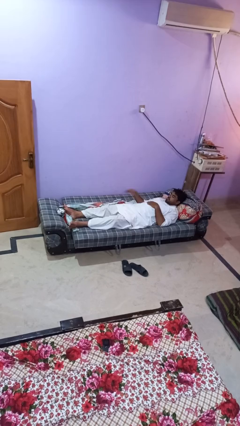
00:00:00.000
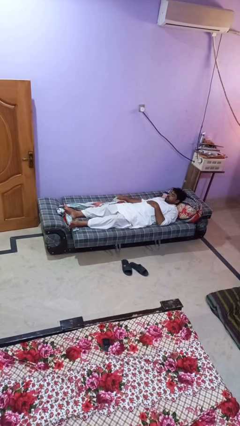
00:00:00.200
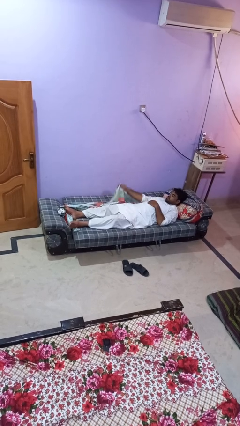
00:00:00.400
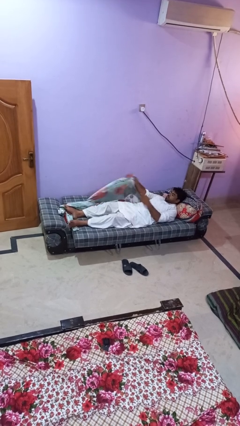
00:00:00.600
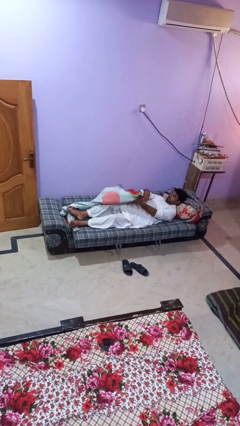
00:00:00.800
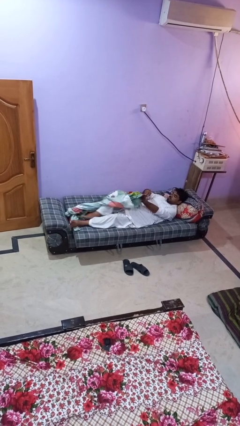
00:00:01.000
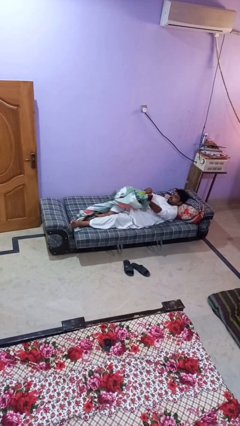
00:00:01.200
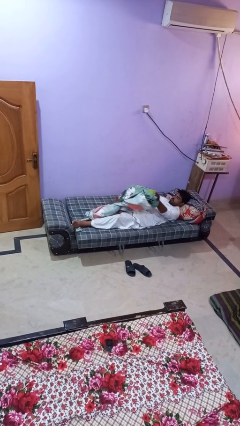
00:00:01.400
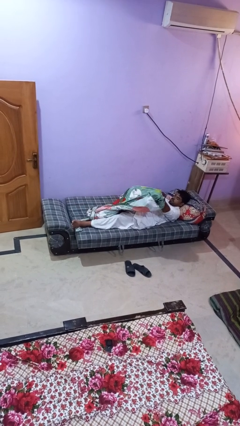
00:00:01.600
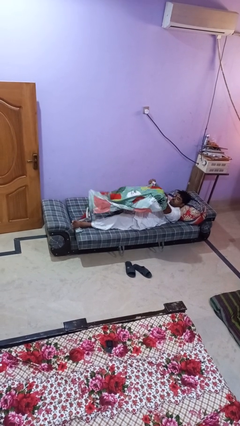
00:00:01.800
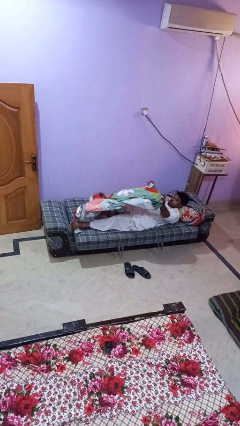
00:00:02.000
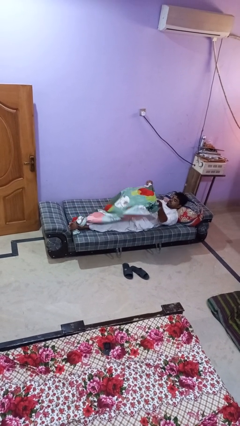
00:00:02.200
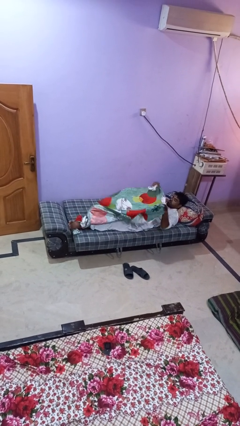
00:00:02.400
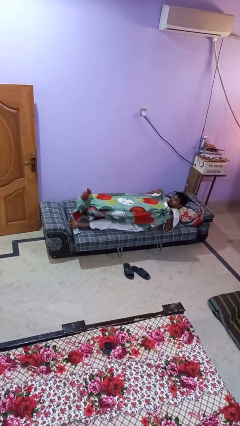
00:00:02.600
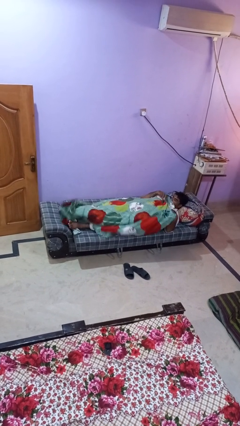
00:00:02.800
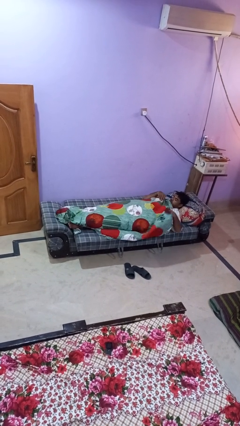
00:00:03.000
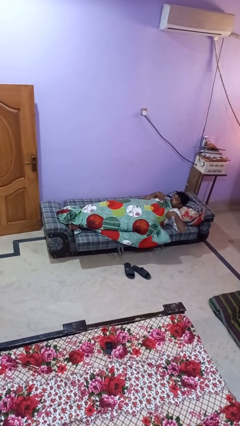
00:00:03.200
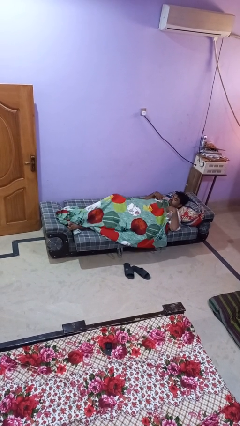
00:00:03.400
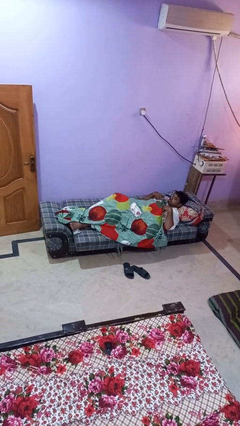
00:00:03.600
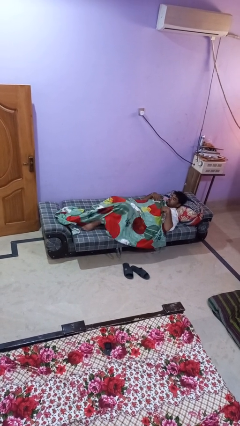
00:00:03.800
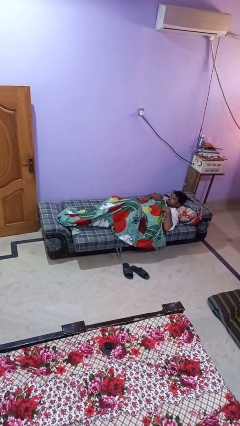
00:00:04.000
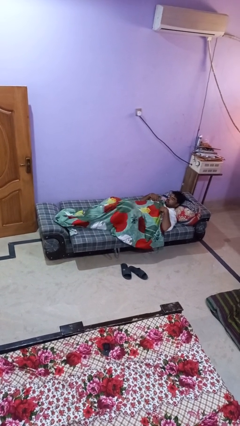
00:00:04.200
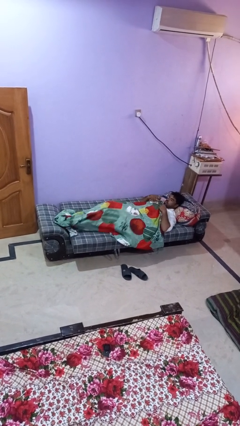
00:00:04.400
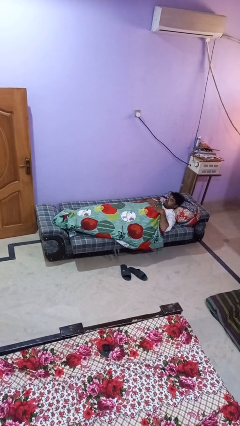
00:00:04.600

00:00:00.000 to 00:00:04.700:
person covers with bedsheets

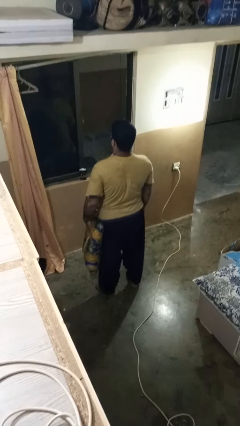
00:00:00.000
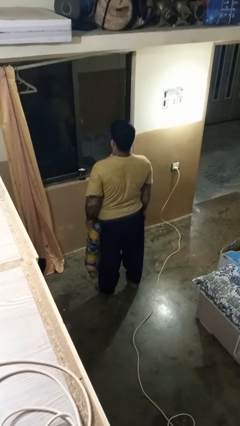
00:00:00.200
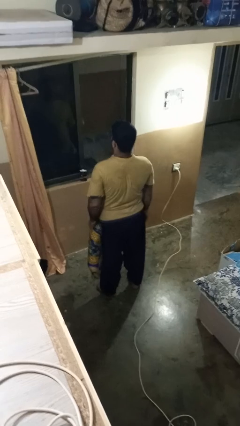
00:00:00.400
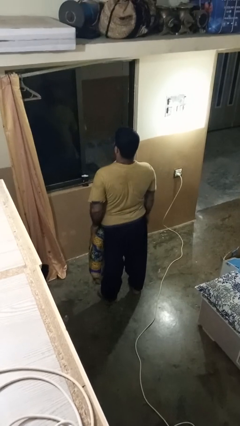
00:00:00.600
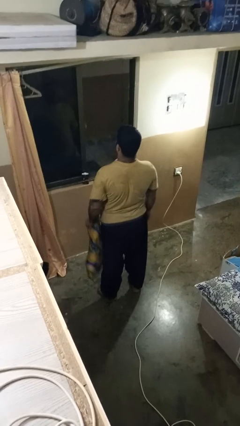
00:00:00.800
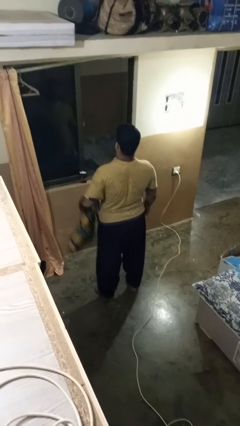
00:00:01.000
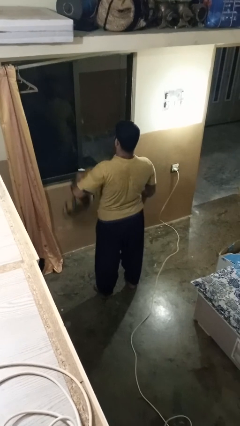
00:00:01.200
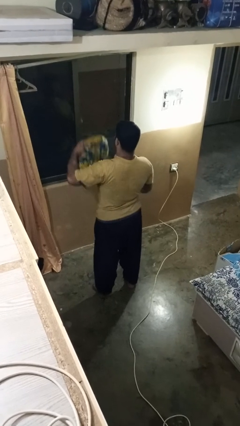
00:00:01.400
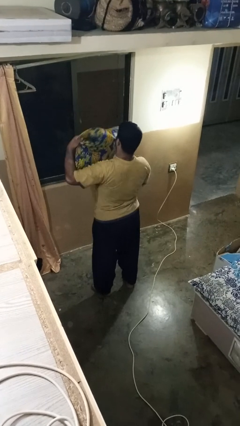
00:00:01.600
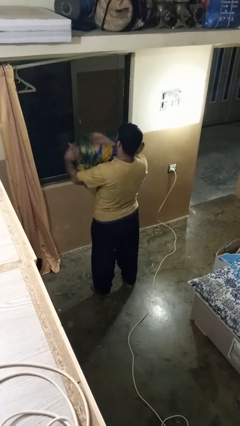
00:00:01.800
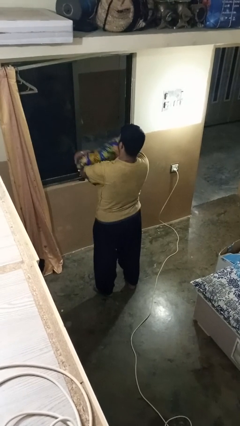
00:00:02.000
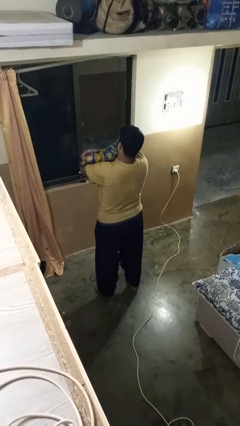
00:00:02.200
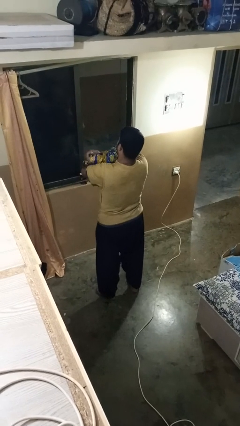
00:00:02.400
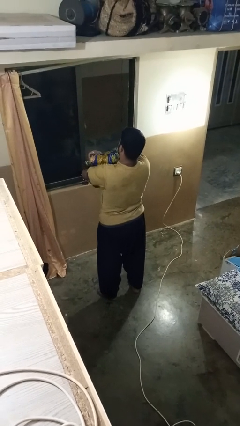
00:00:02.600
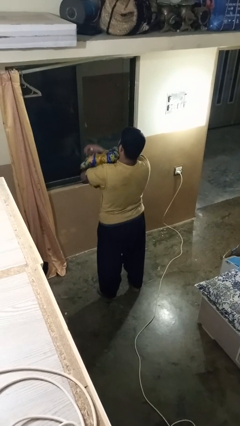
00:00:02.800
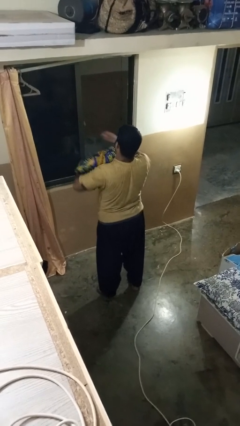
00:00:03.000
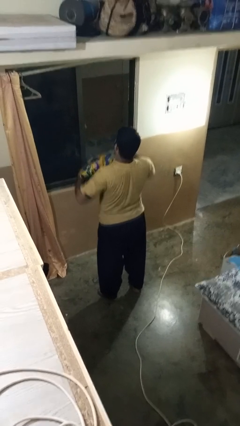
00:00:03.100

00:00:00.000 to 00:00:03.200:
person squeezes object

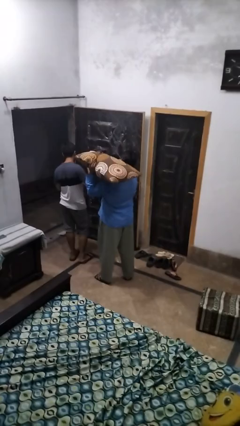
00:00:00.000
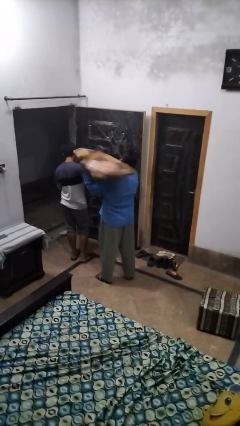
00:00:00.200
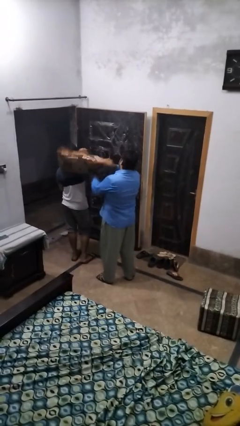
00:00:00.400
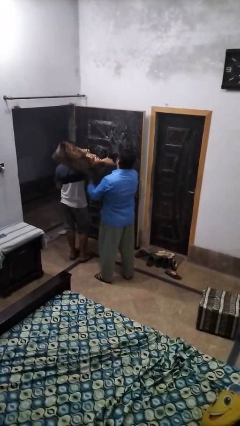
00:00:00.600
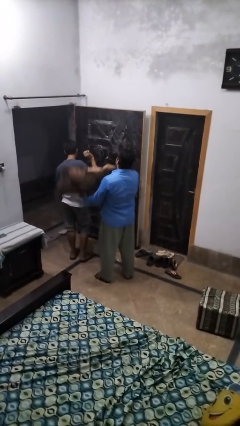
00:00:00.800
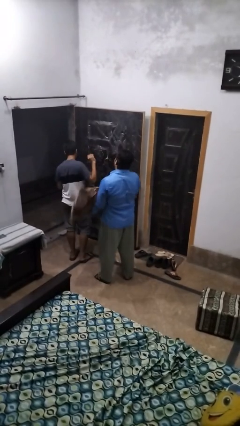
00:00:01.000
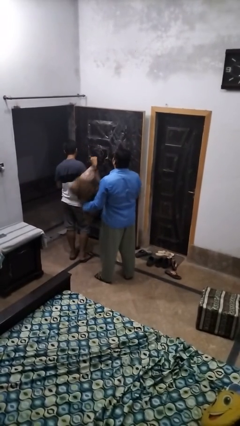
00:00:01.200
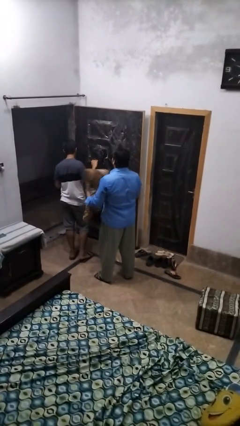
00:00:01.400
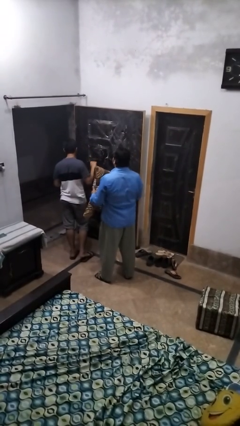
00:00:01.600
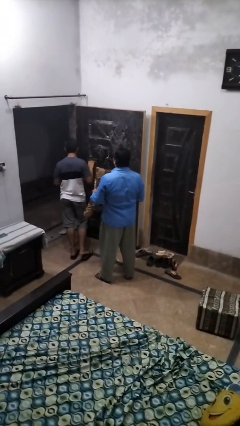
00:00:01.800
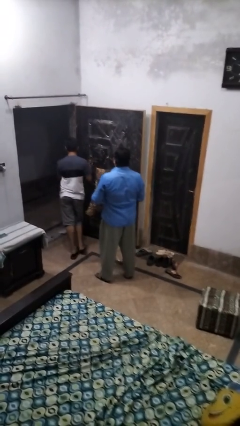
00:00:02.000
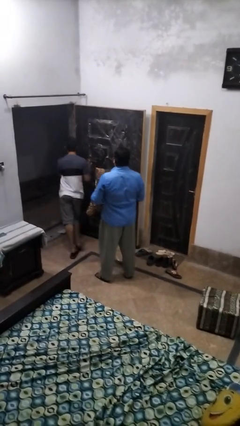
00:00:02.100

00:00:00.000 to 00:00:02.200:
person hits person with pillow

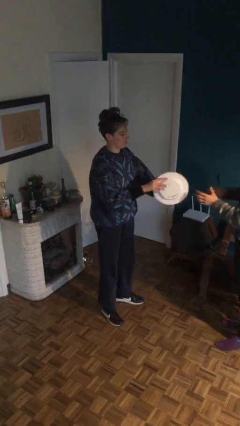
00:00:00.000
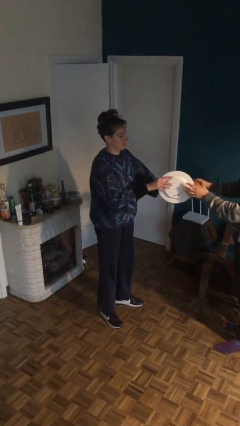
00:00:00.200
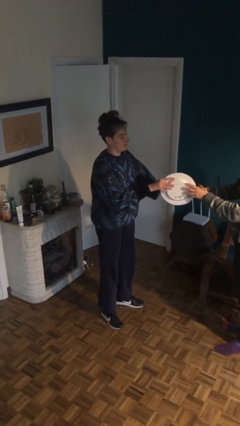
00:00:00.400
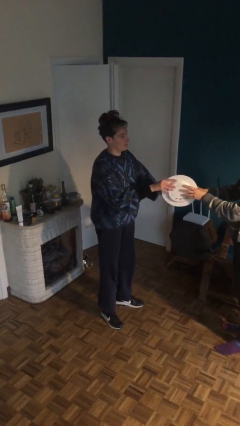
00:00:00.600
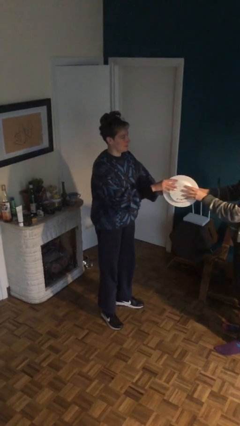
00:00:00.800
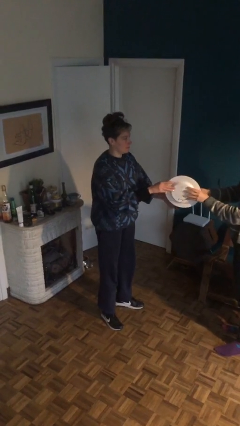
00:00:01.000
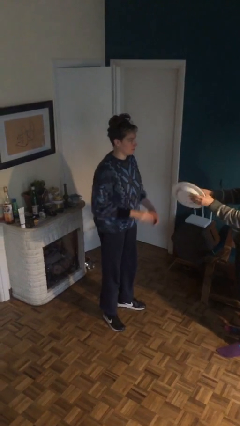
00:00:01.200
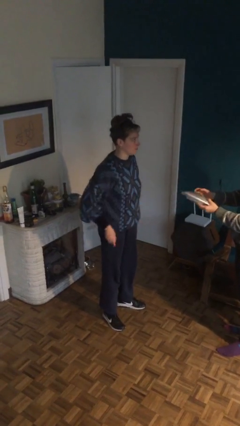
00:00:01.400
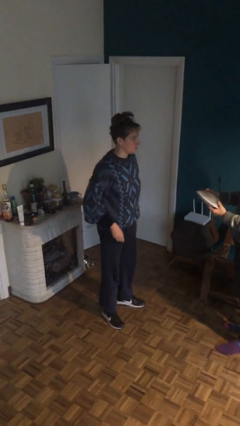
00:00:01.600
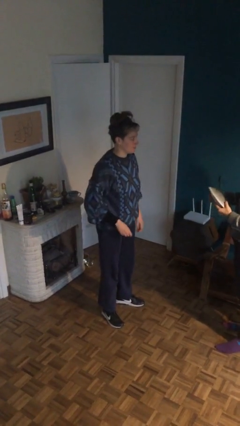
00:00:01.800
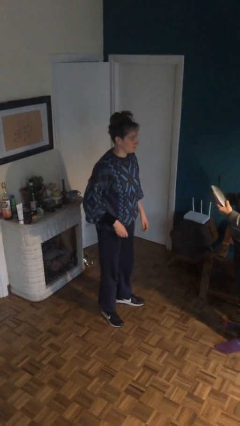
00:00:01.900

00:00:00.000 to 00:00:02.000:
person transfers object to person

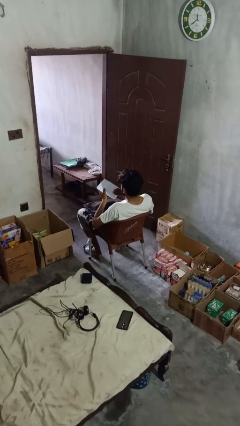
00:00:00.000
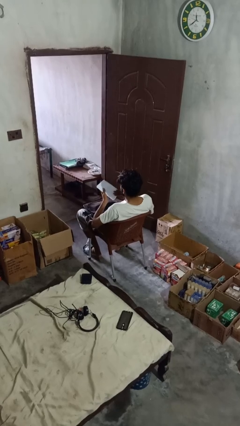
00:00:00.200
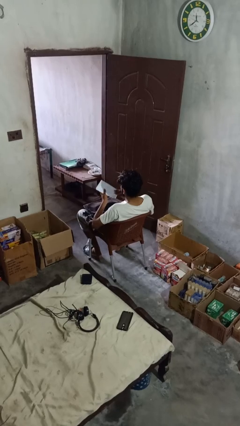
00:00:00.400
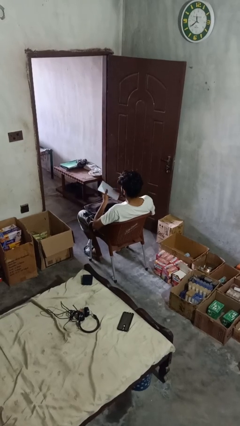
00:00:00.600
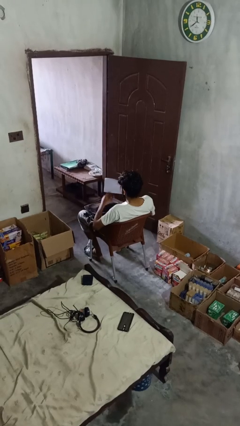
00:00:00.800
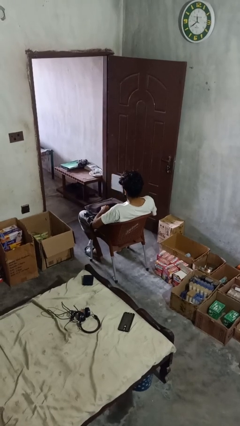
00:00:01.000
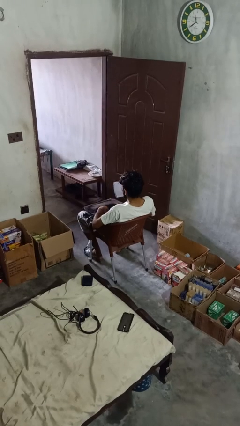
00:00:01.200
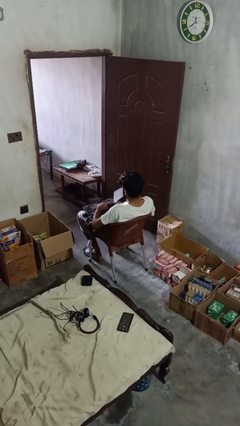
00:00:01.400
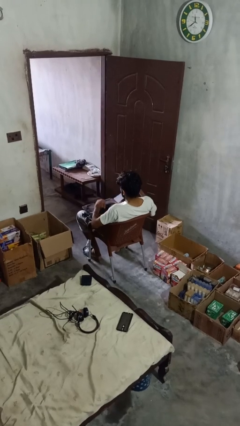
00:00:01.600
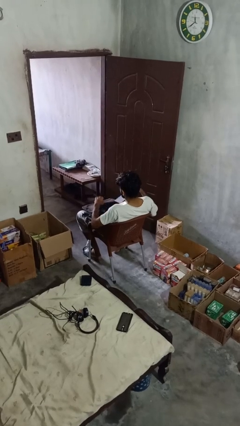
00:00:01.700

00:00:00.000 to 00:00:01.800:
person takes object from backpack

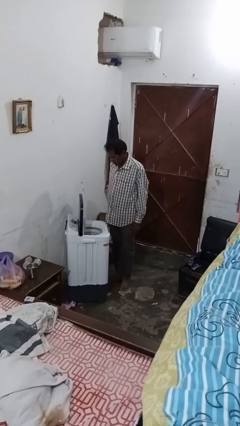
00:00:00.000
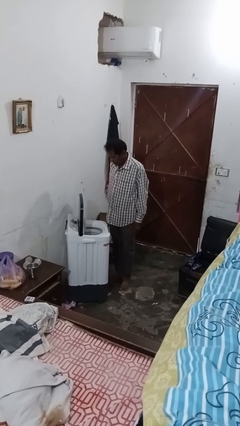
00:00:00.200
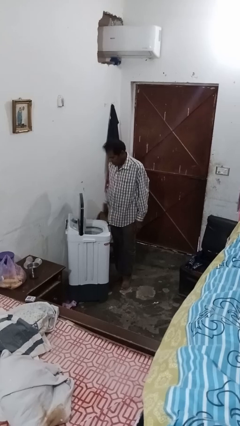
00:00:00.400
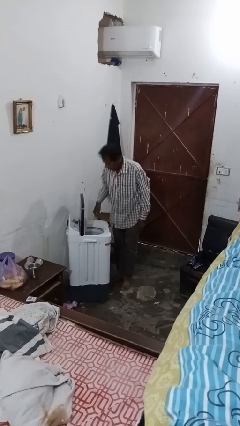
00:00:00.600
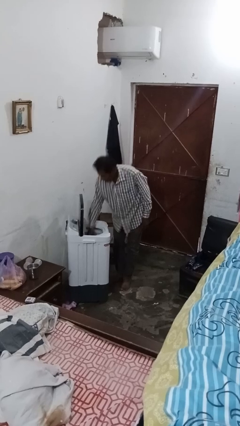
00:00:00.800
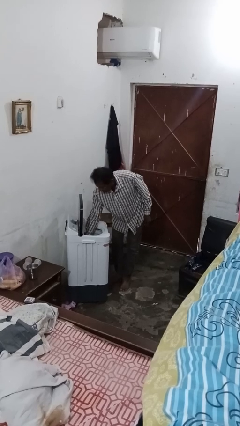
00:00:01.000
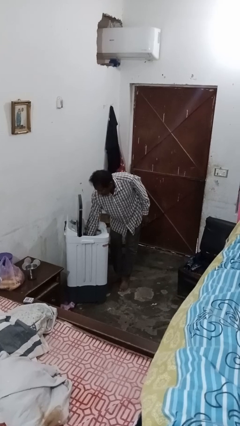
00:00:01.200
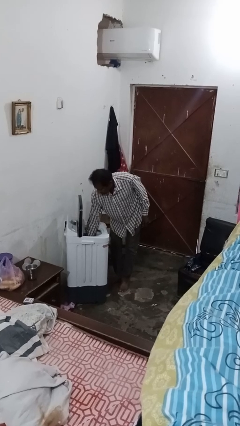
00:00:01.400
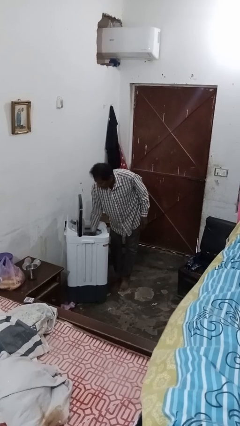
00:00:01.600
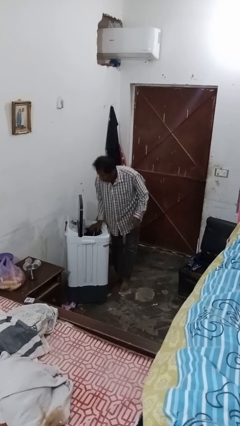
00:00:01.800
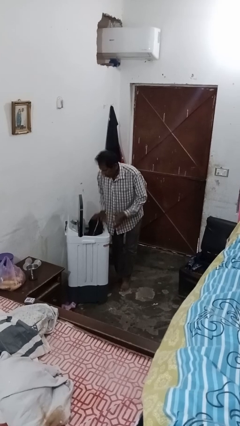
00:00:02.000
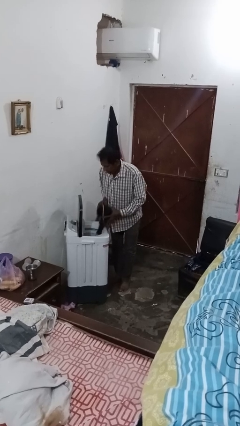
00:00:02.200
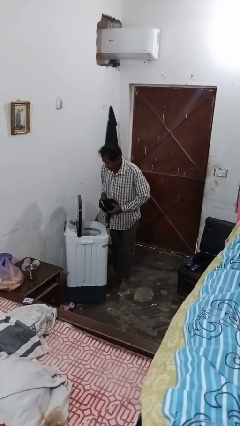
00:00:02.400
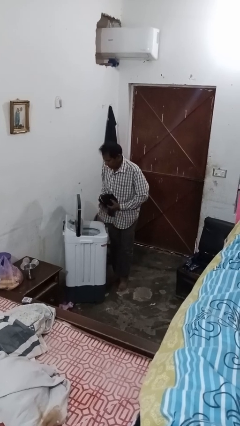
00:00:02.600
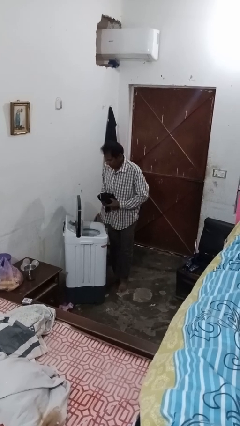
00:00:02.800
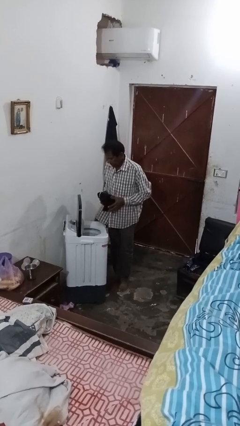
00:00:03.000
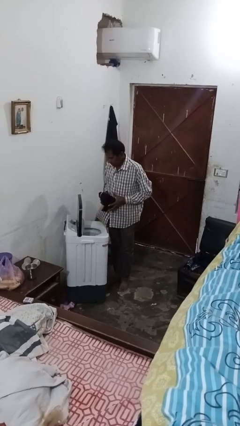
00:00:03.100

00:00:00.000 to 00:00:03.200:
person unloads clotheswasher
